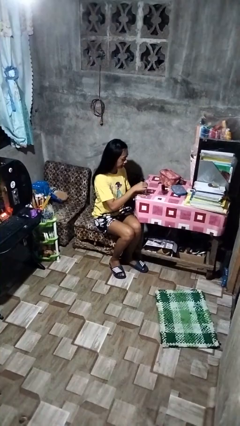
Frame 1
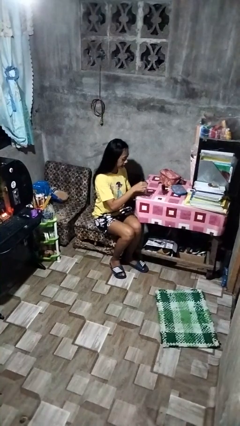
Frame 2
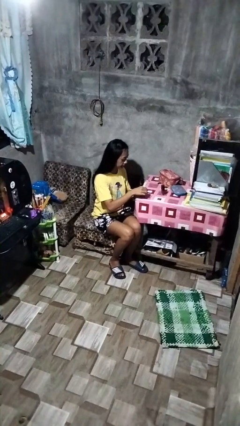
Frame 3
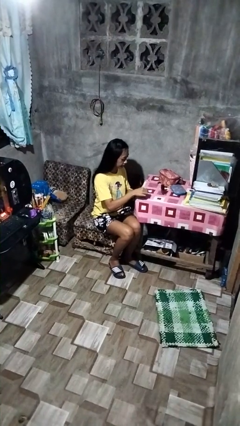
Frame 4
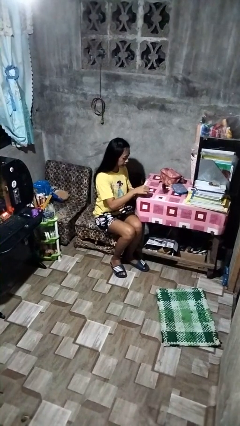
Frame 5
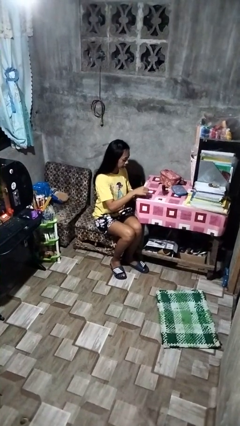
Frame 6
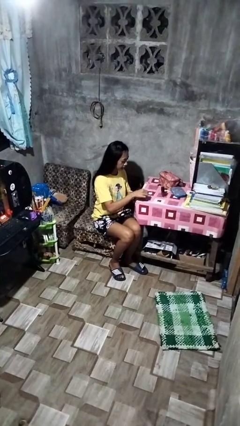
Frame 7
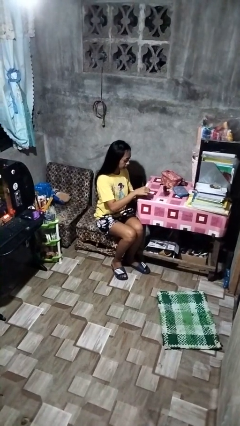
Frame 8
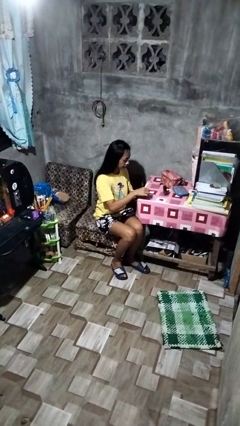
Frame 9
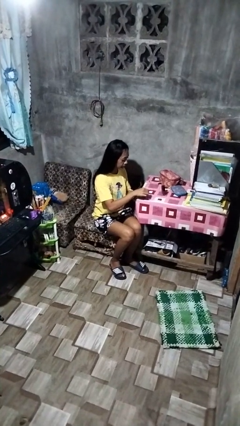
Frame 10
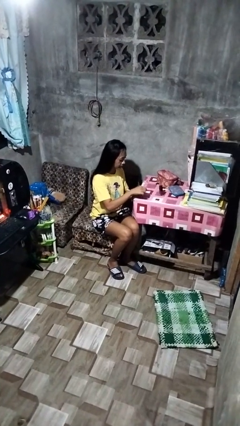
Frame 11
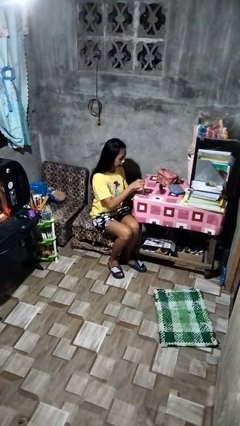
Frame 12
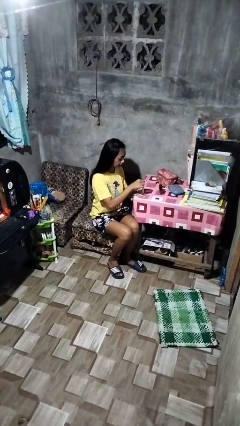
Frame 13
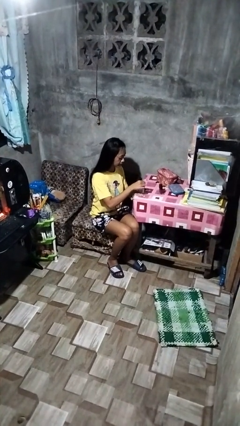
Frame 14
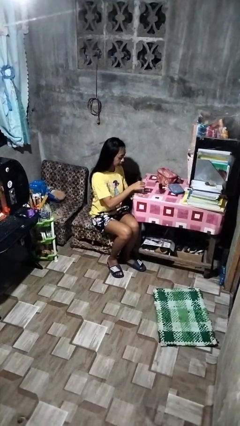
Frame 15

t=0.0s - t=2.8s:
person paints fingernails

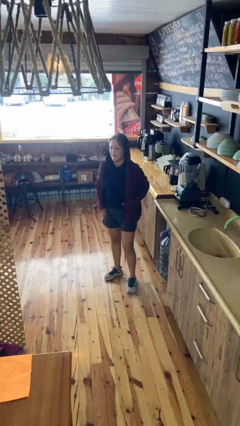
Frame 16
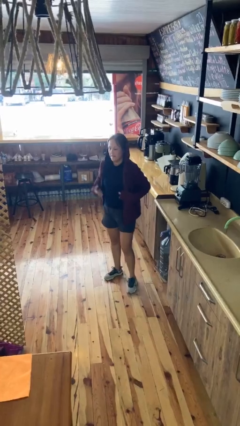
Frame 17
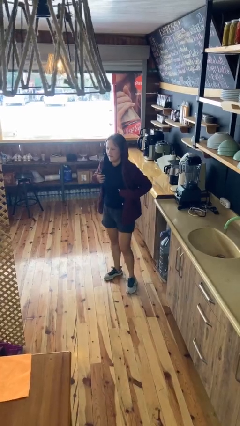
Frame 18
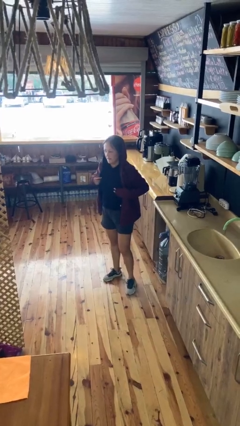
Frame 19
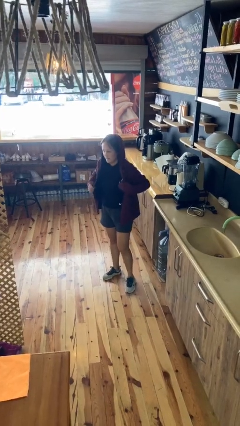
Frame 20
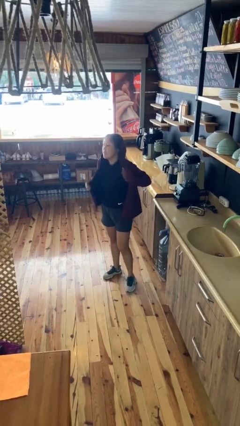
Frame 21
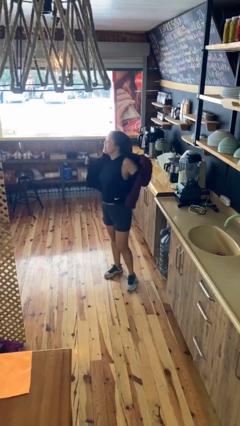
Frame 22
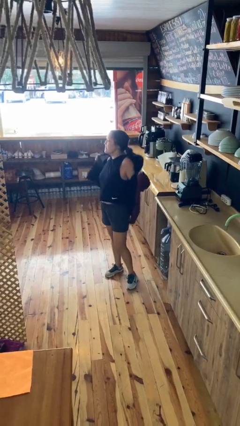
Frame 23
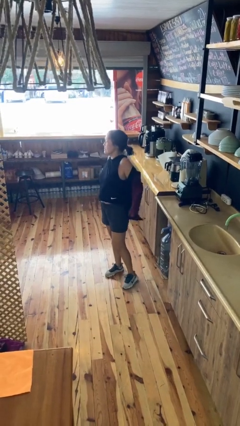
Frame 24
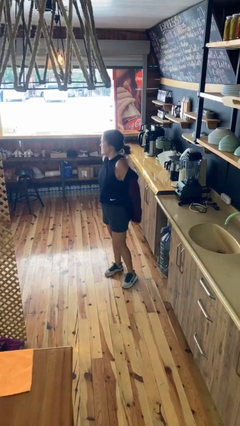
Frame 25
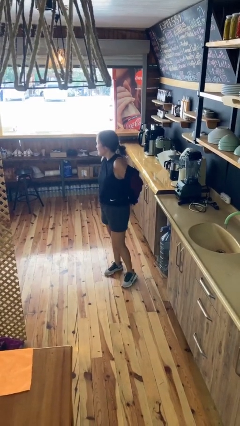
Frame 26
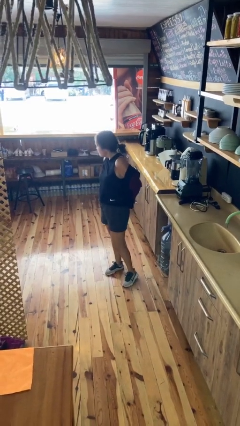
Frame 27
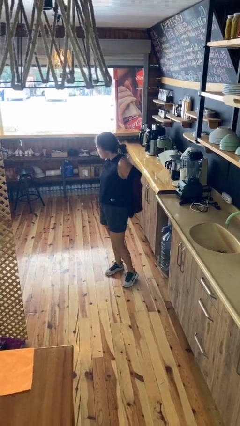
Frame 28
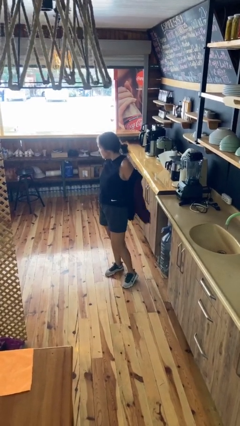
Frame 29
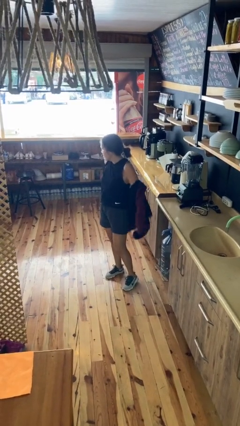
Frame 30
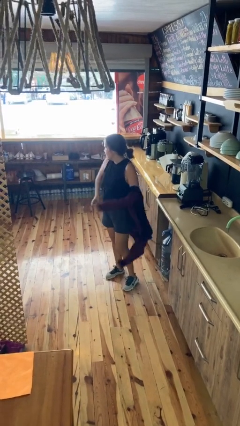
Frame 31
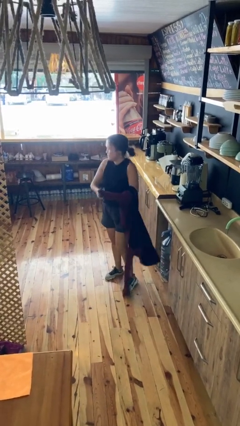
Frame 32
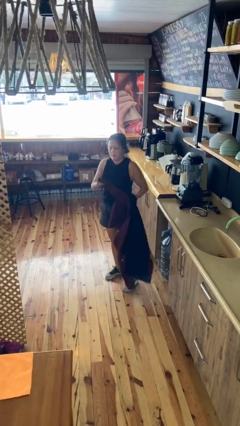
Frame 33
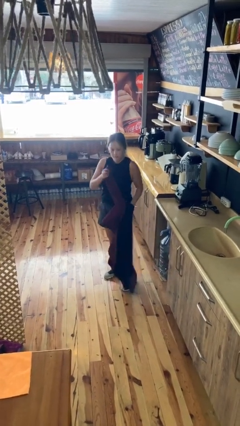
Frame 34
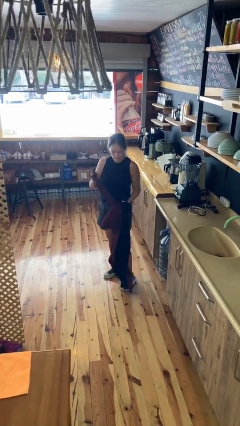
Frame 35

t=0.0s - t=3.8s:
person takes off hoodie

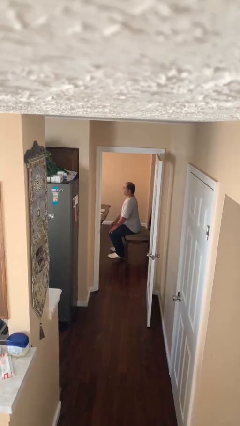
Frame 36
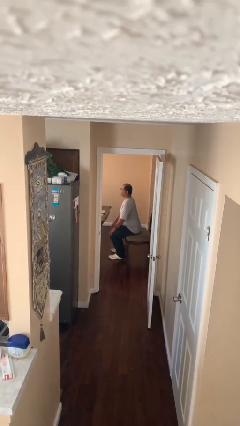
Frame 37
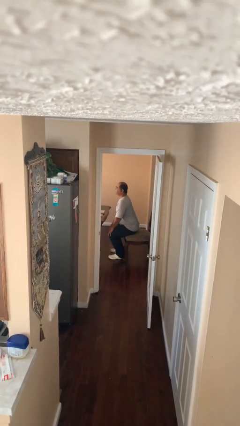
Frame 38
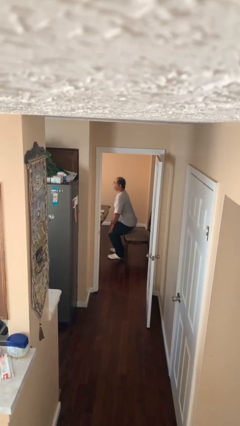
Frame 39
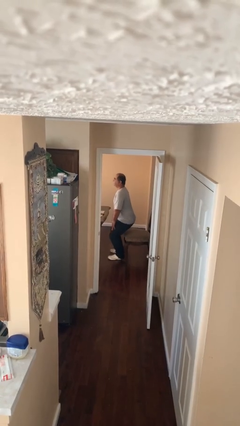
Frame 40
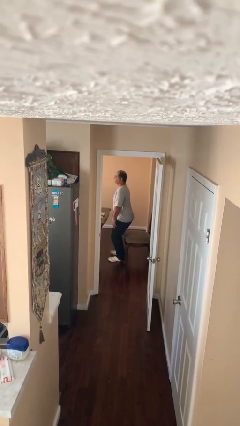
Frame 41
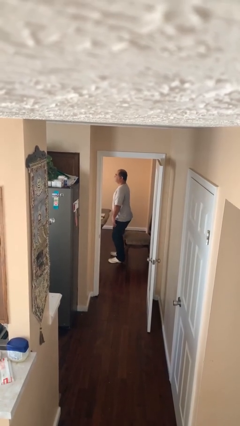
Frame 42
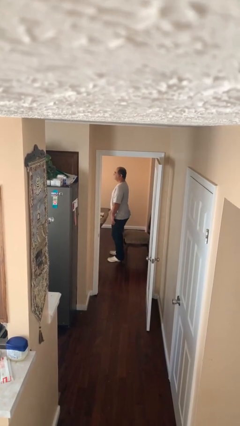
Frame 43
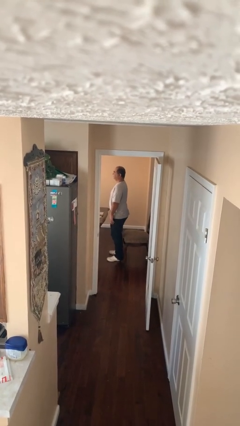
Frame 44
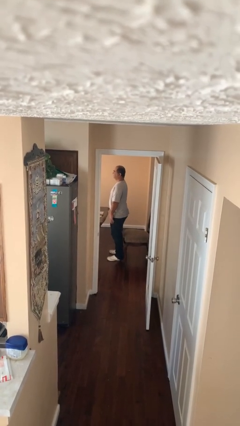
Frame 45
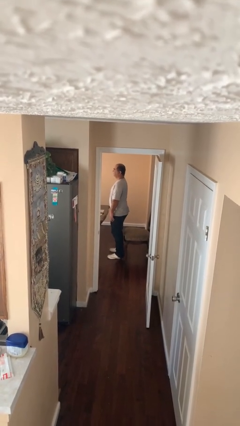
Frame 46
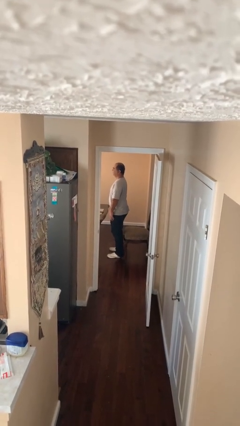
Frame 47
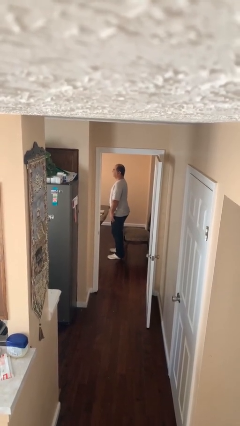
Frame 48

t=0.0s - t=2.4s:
person stands up

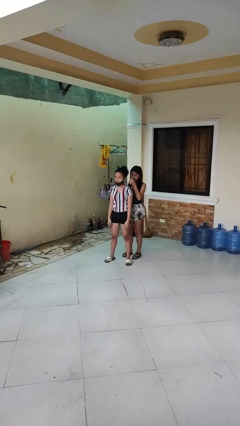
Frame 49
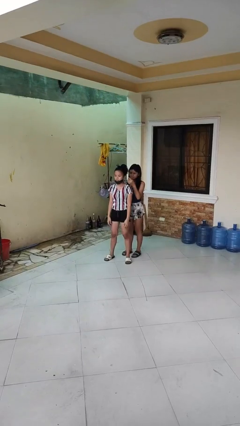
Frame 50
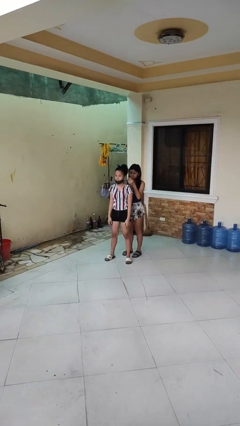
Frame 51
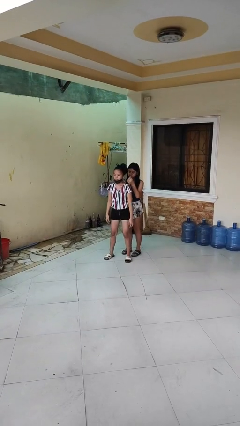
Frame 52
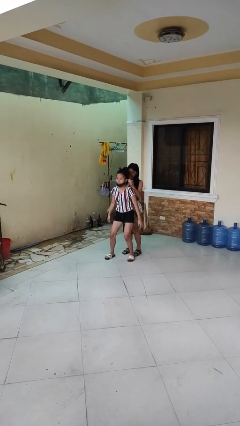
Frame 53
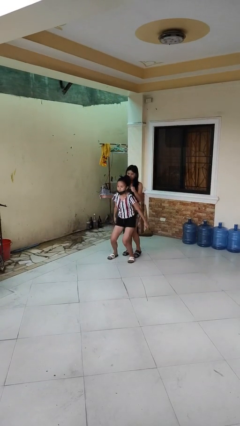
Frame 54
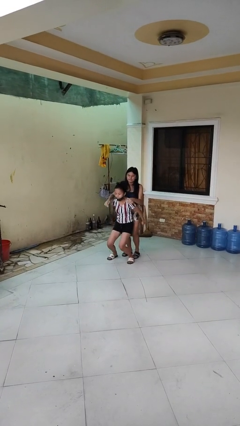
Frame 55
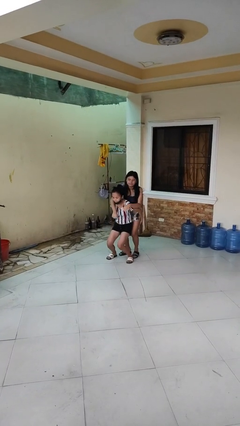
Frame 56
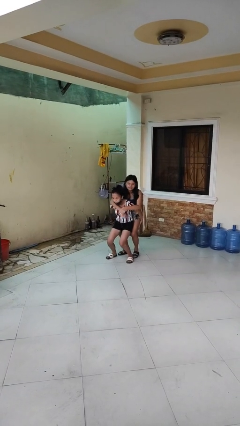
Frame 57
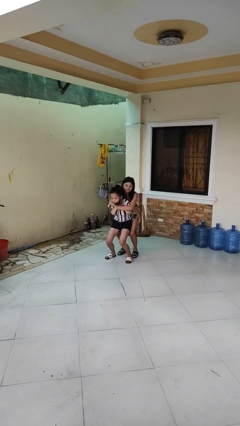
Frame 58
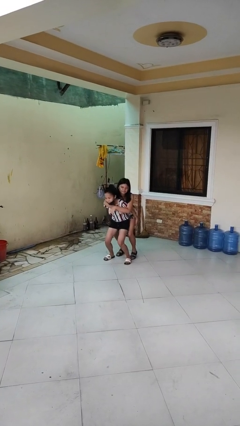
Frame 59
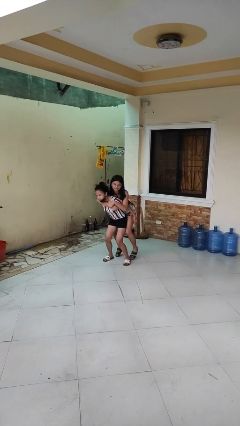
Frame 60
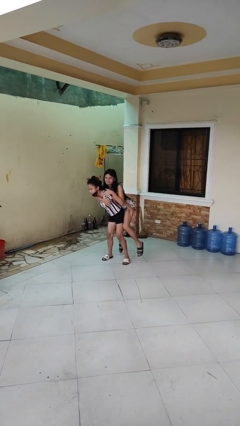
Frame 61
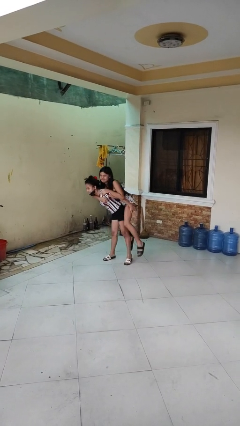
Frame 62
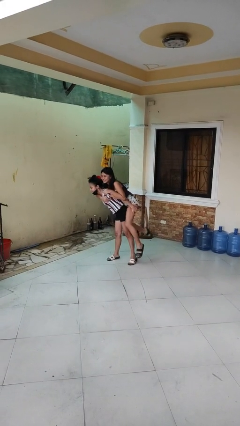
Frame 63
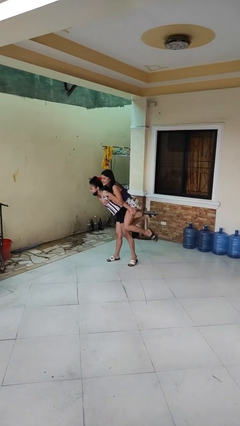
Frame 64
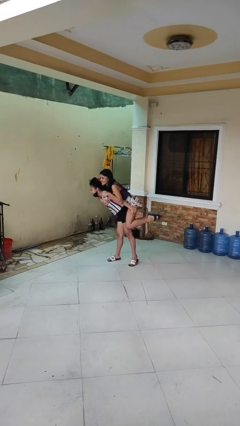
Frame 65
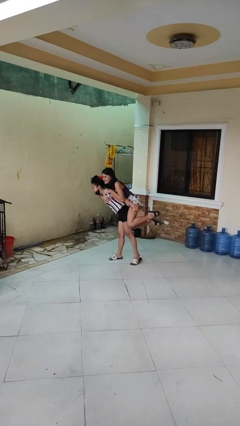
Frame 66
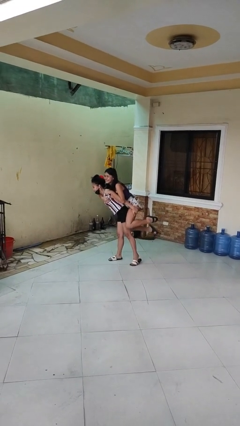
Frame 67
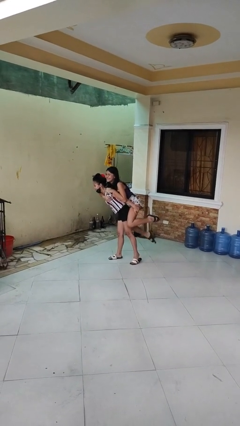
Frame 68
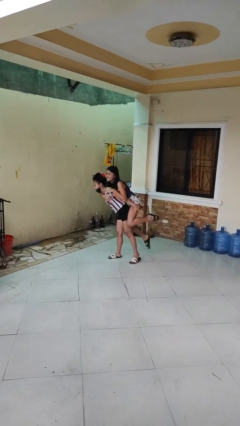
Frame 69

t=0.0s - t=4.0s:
person carries person over shoulder

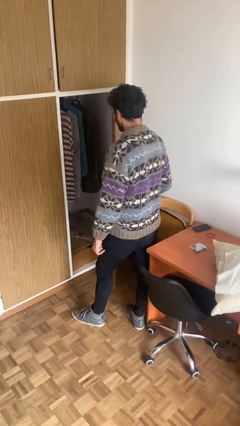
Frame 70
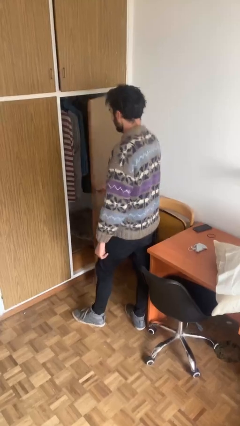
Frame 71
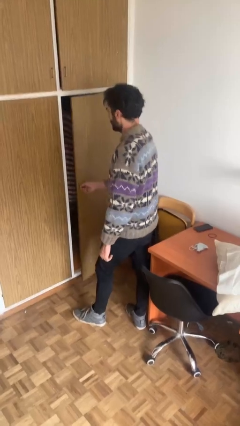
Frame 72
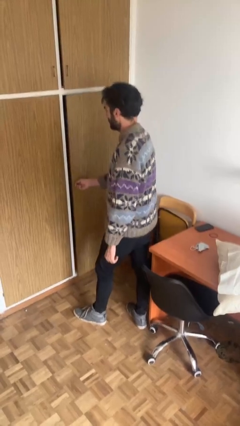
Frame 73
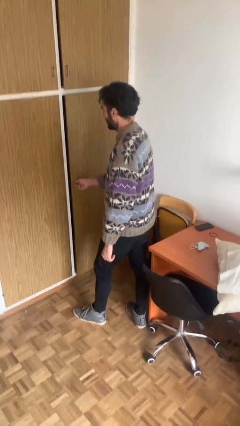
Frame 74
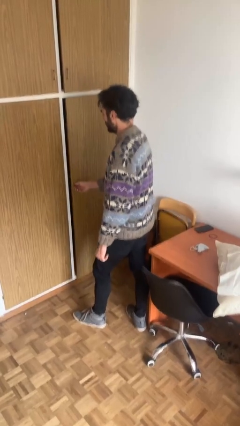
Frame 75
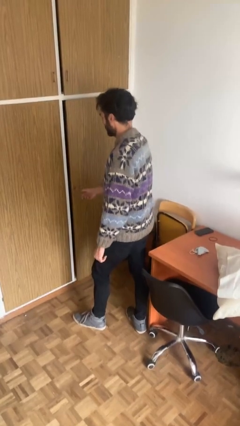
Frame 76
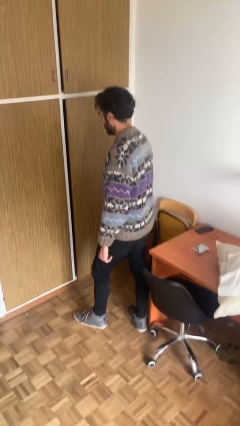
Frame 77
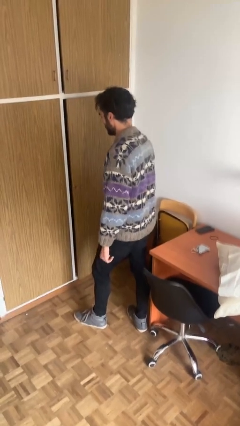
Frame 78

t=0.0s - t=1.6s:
person closes closet door

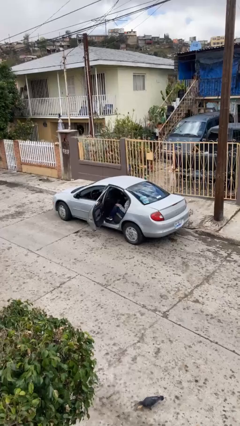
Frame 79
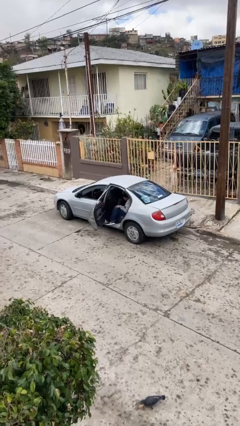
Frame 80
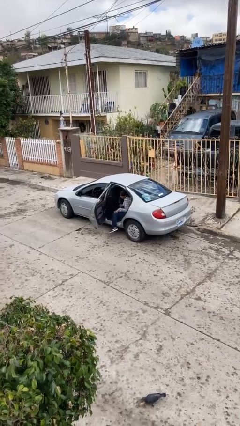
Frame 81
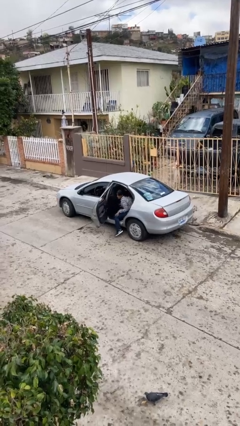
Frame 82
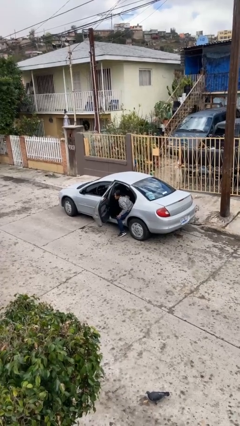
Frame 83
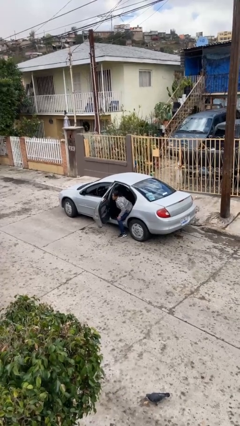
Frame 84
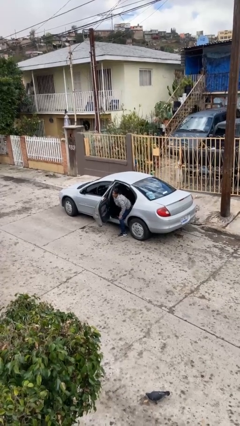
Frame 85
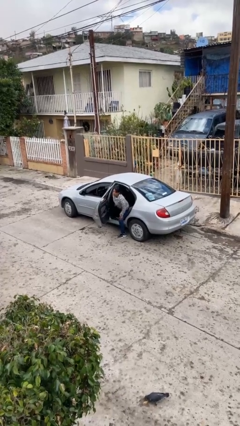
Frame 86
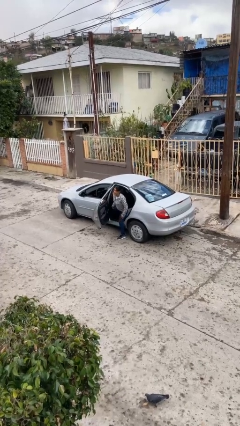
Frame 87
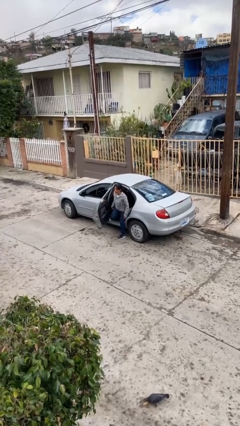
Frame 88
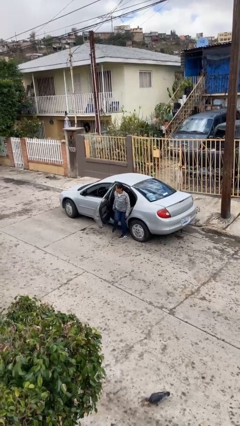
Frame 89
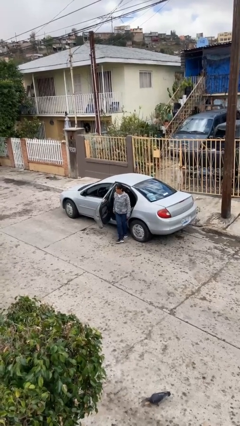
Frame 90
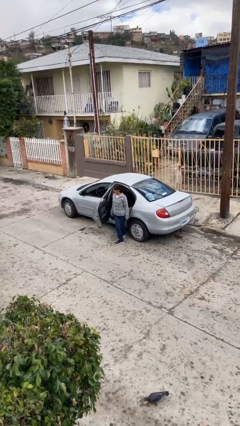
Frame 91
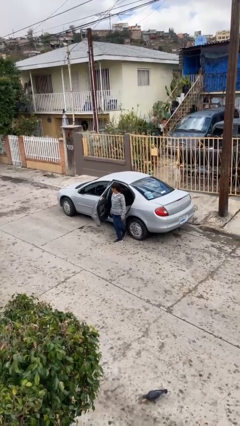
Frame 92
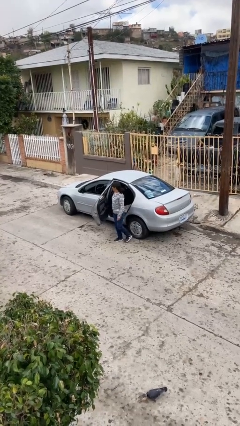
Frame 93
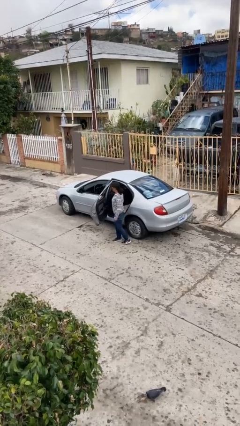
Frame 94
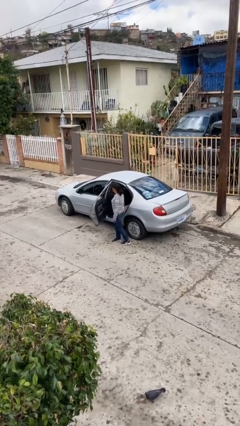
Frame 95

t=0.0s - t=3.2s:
person exits car
